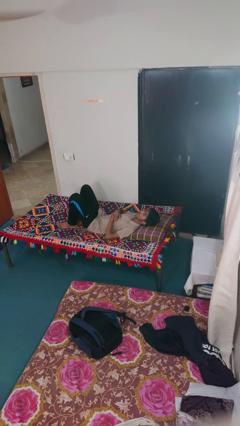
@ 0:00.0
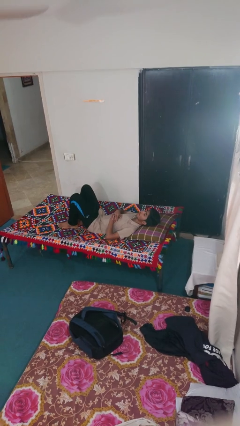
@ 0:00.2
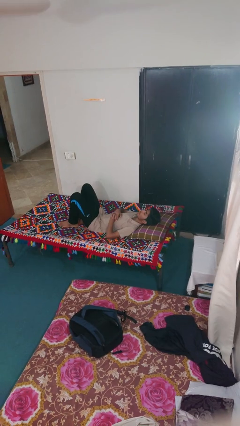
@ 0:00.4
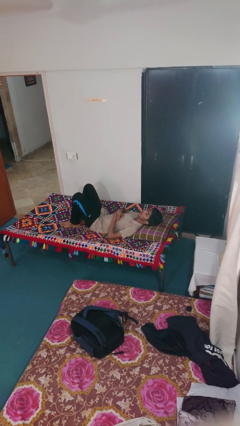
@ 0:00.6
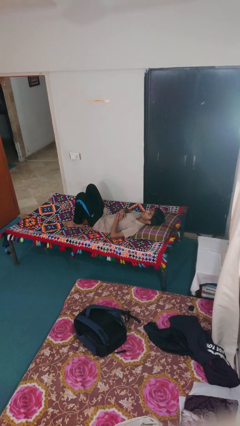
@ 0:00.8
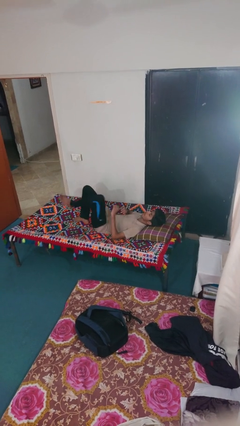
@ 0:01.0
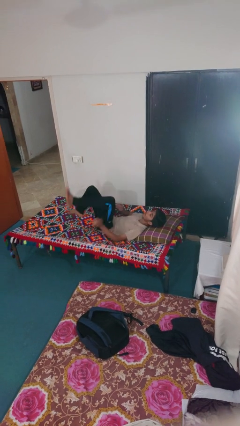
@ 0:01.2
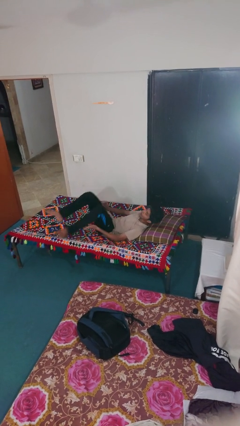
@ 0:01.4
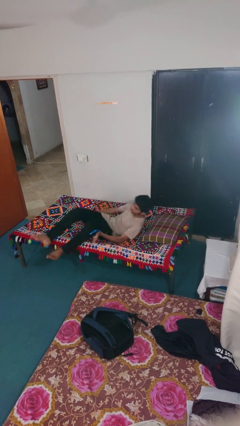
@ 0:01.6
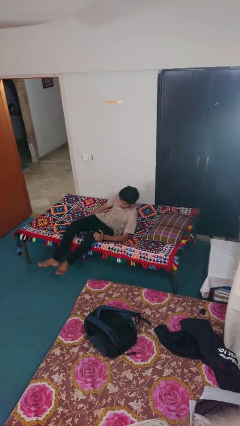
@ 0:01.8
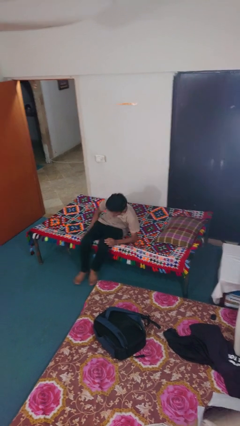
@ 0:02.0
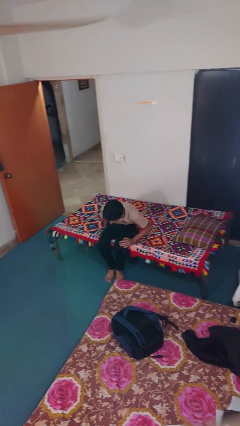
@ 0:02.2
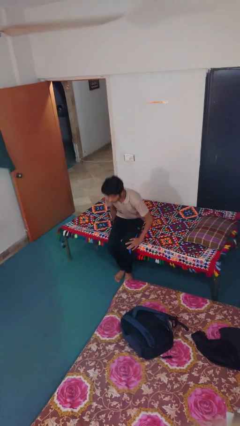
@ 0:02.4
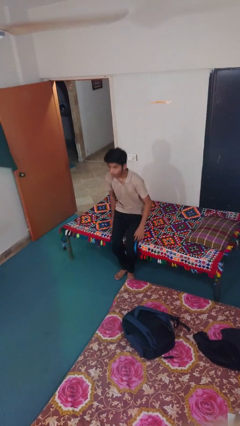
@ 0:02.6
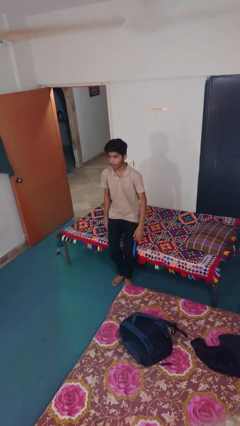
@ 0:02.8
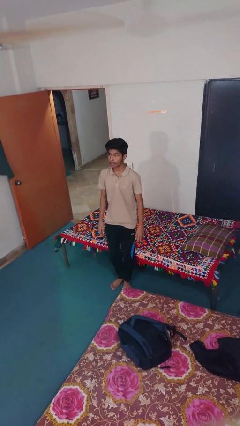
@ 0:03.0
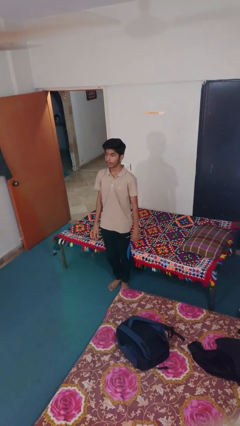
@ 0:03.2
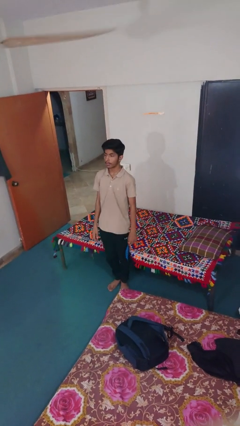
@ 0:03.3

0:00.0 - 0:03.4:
person stands up

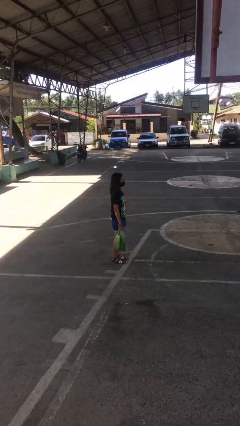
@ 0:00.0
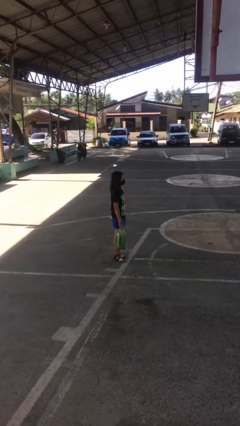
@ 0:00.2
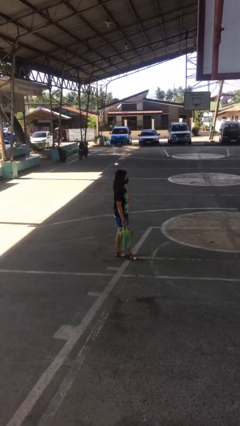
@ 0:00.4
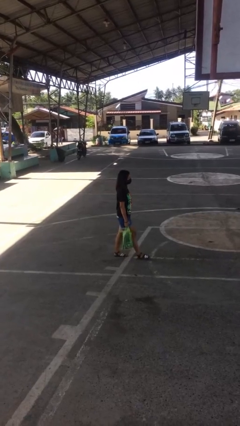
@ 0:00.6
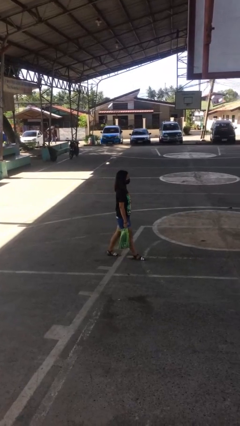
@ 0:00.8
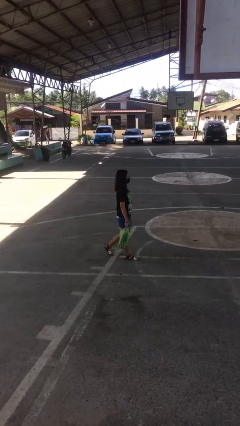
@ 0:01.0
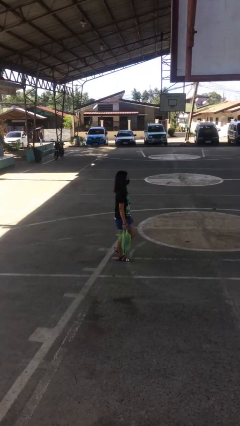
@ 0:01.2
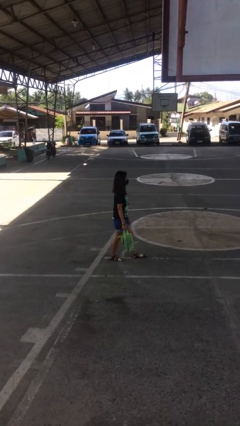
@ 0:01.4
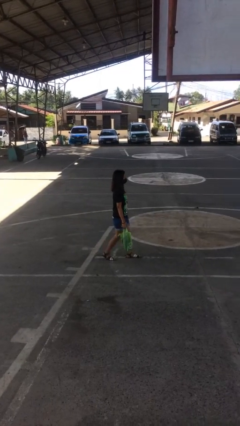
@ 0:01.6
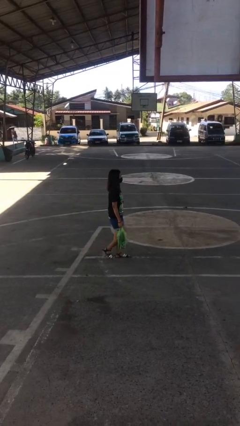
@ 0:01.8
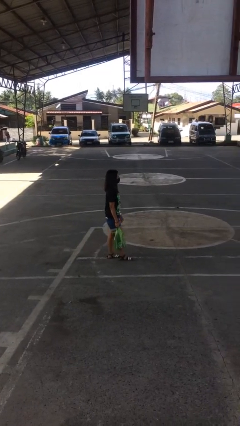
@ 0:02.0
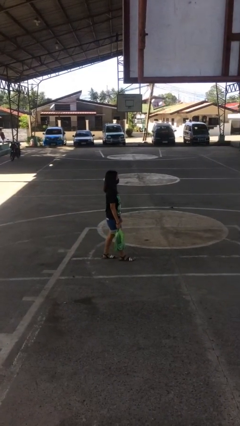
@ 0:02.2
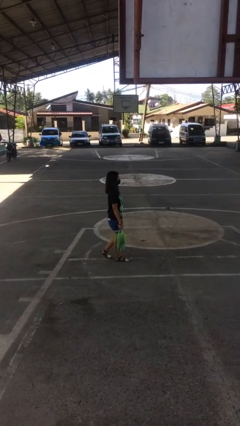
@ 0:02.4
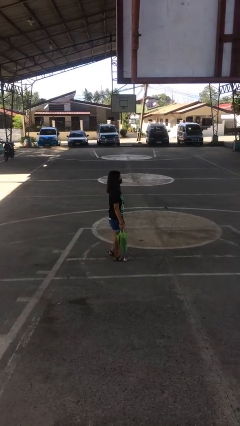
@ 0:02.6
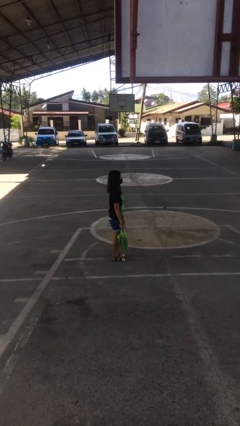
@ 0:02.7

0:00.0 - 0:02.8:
person carries groceries

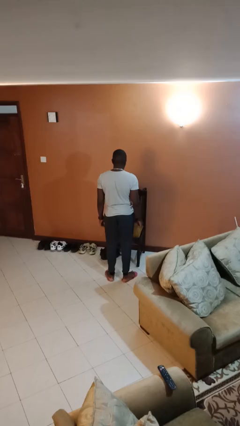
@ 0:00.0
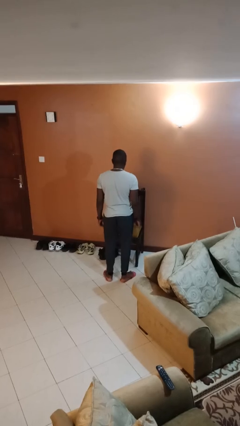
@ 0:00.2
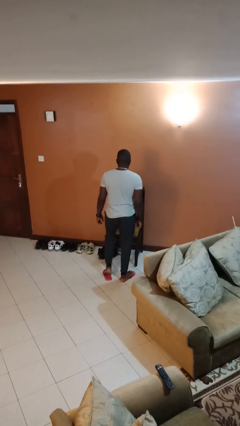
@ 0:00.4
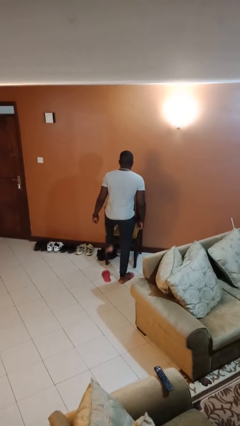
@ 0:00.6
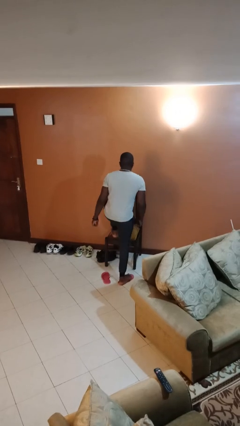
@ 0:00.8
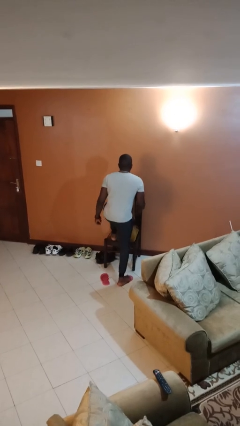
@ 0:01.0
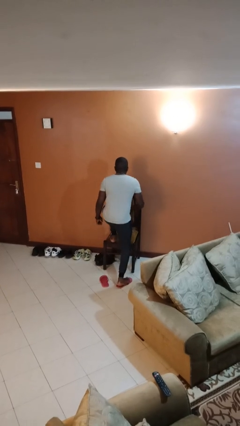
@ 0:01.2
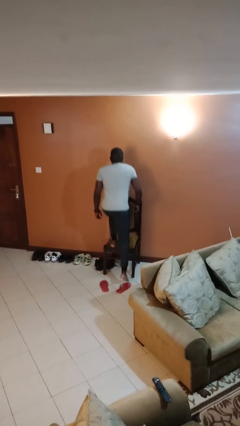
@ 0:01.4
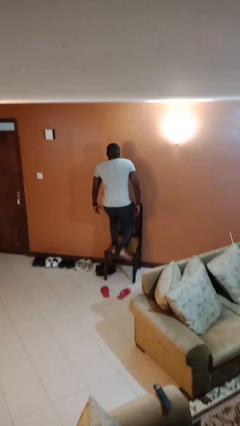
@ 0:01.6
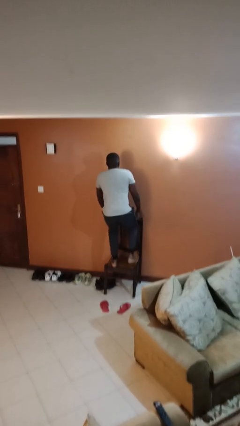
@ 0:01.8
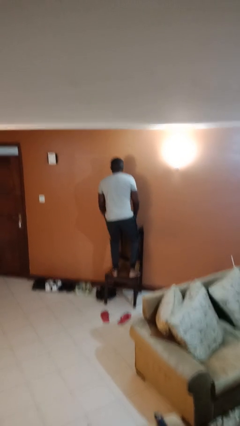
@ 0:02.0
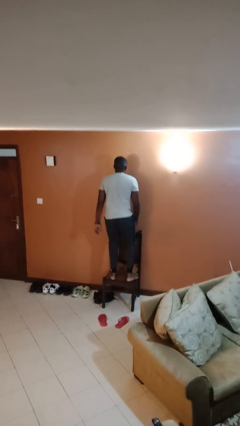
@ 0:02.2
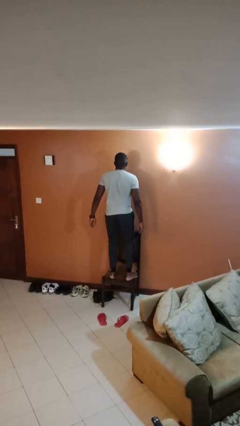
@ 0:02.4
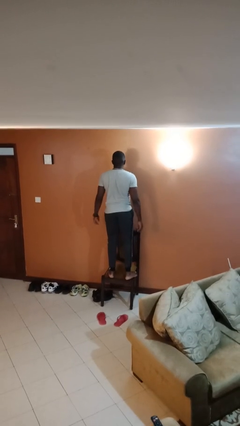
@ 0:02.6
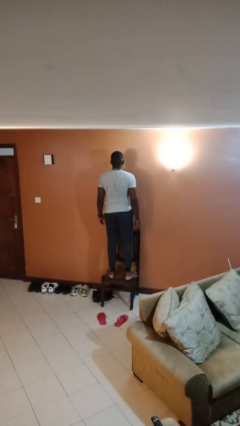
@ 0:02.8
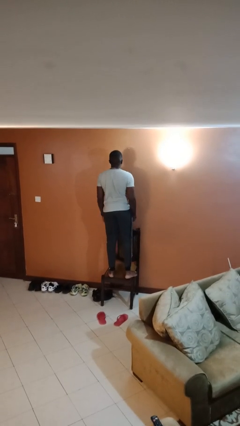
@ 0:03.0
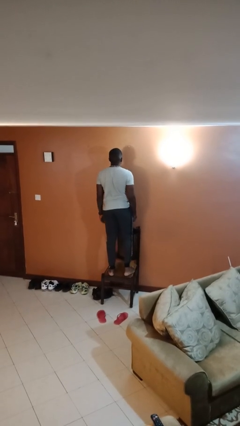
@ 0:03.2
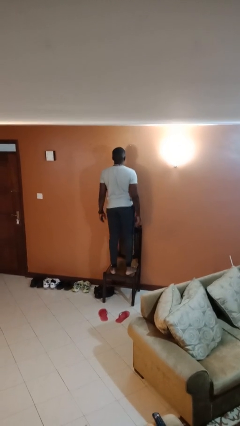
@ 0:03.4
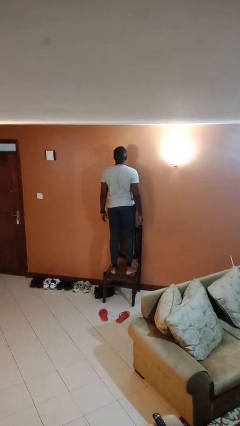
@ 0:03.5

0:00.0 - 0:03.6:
person climbs on chair

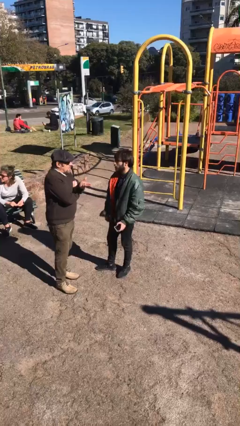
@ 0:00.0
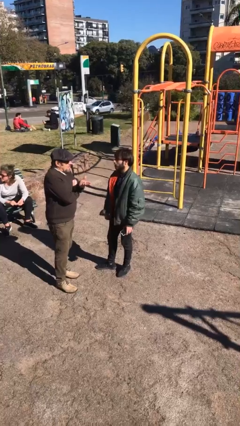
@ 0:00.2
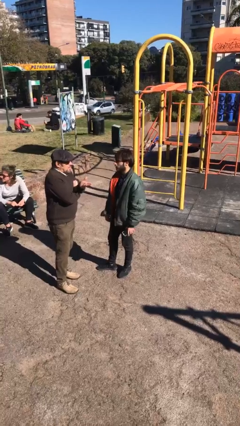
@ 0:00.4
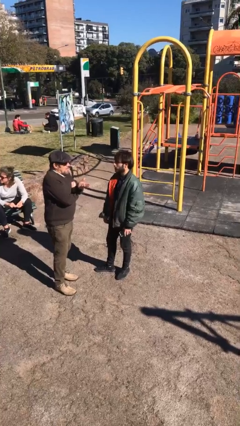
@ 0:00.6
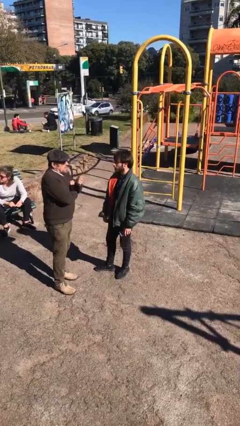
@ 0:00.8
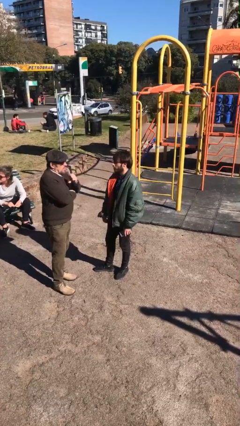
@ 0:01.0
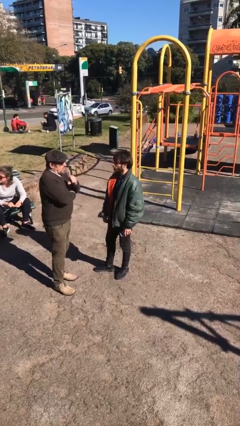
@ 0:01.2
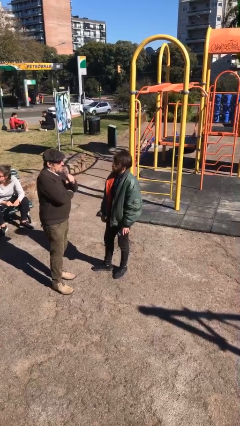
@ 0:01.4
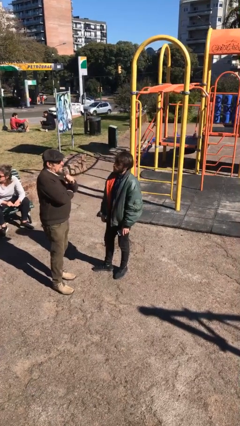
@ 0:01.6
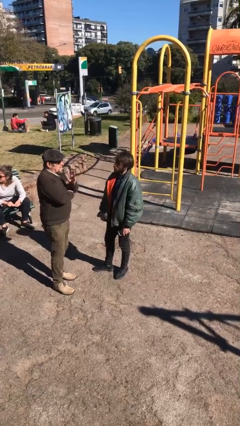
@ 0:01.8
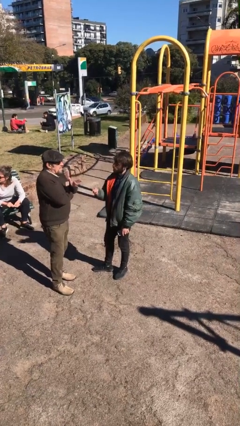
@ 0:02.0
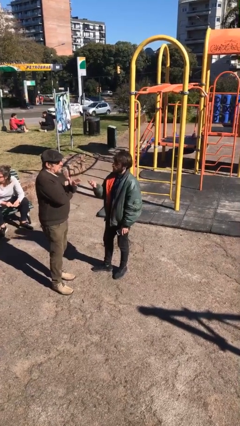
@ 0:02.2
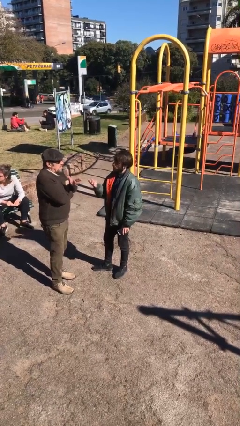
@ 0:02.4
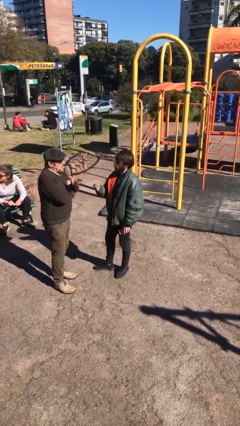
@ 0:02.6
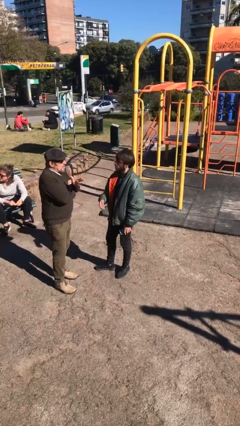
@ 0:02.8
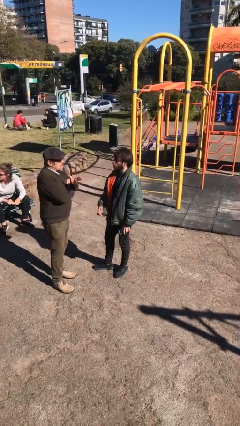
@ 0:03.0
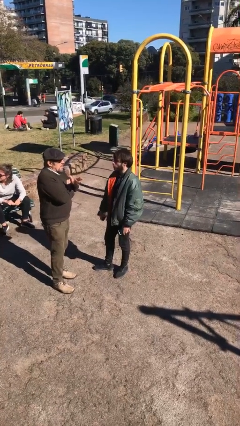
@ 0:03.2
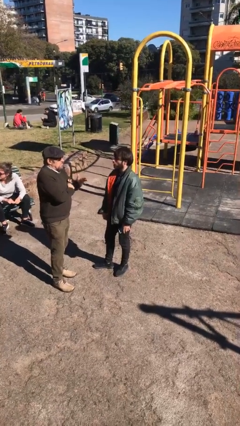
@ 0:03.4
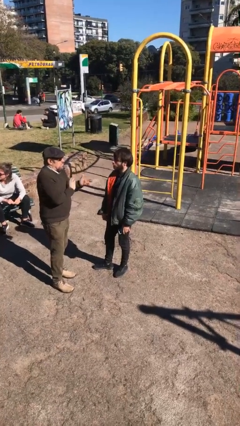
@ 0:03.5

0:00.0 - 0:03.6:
person talks to person

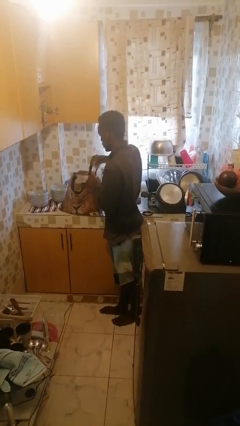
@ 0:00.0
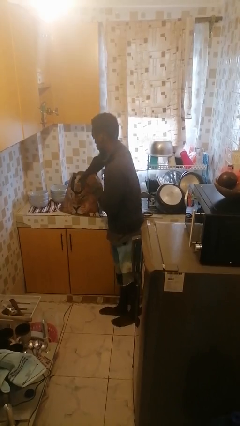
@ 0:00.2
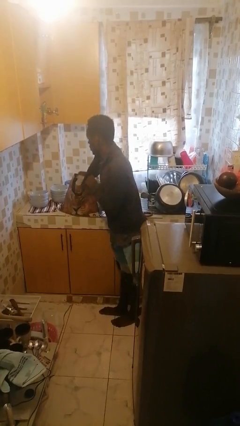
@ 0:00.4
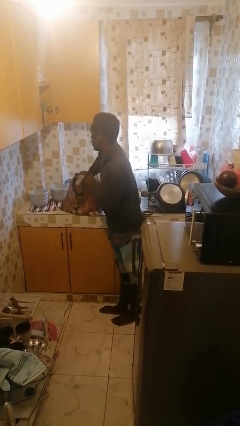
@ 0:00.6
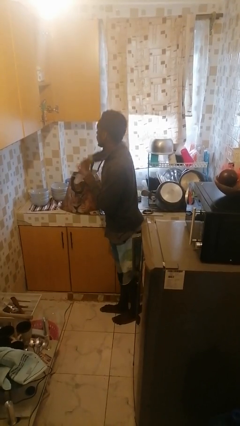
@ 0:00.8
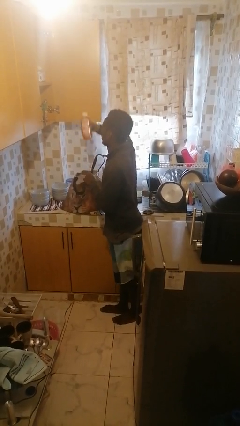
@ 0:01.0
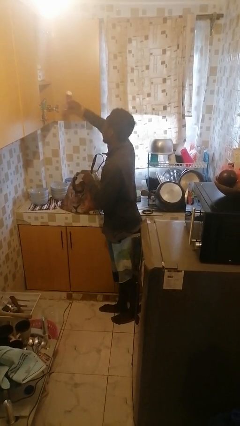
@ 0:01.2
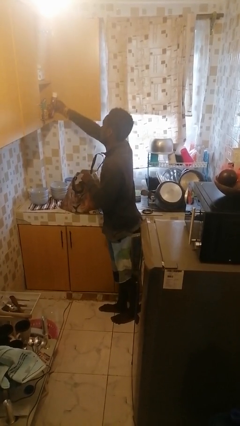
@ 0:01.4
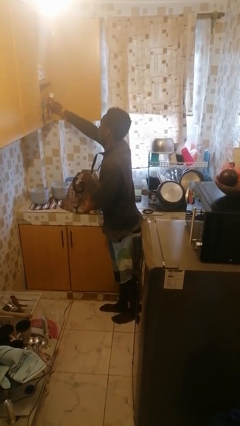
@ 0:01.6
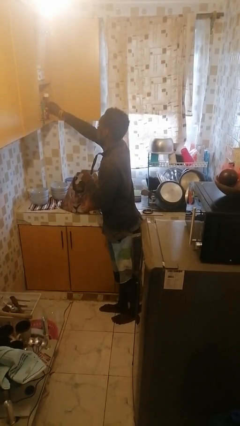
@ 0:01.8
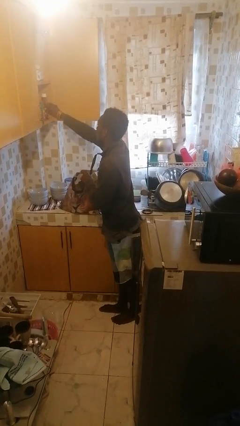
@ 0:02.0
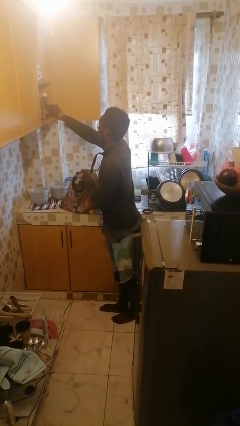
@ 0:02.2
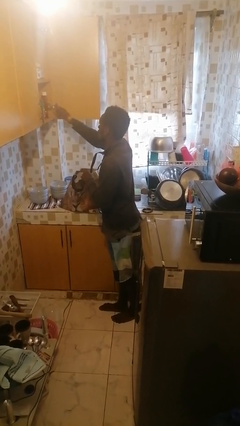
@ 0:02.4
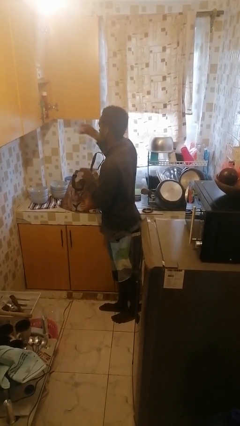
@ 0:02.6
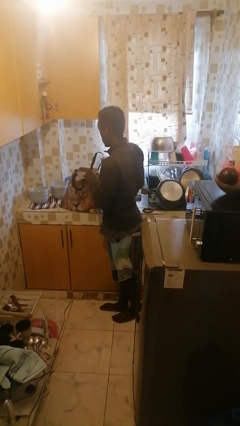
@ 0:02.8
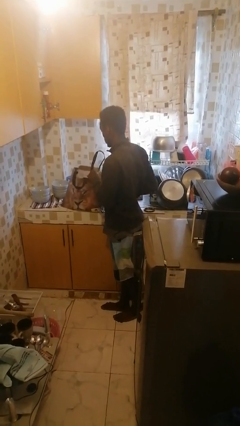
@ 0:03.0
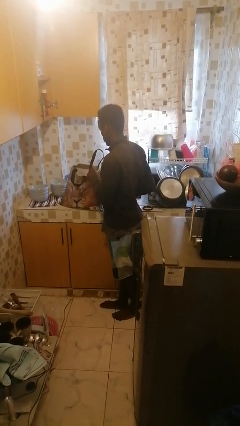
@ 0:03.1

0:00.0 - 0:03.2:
person loads groceries into cabinet

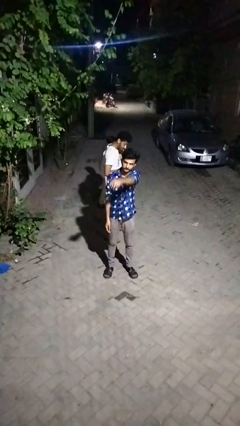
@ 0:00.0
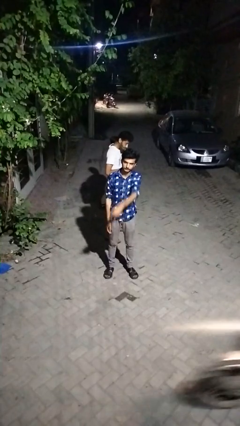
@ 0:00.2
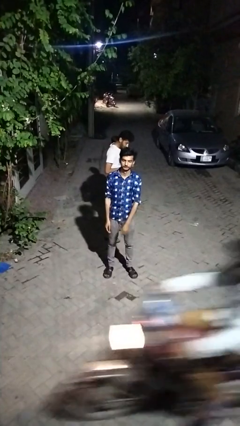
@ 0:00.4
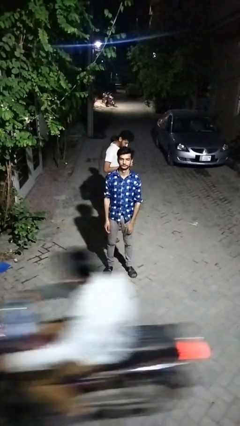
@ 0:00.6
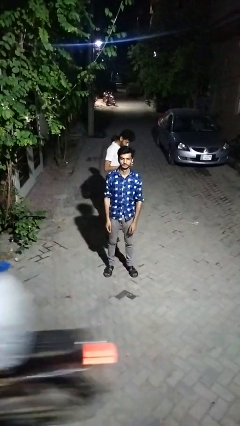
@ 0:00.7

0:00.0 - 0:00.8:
person points at person
